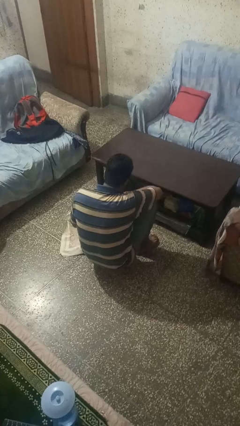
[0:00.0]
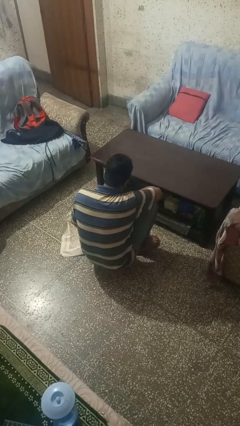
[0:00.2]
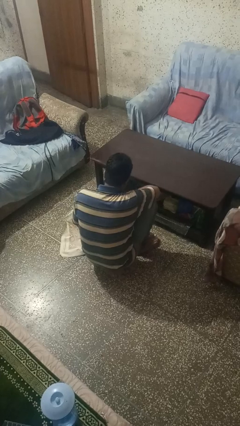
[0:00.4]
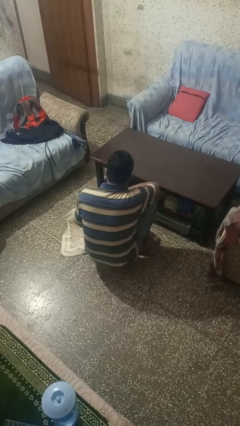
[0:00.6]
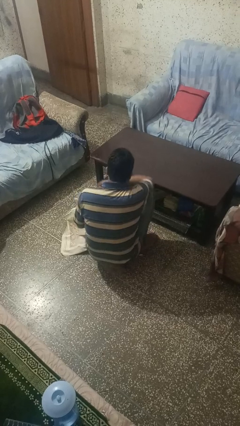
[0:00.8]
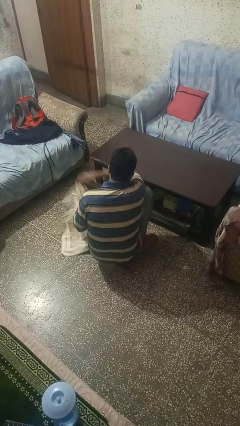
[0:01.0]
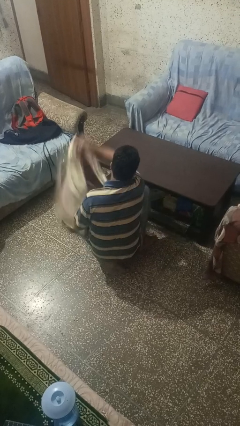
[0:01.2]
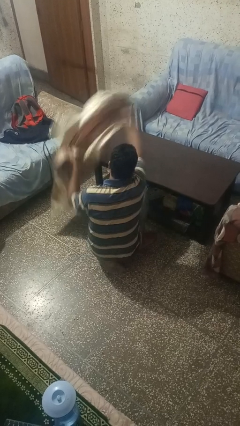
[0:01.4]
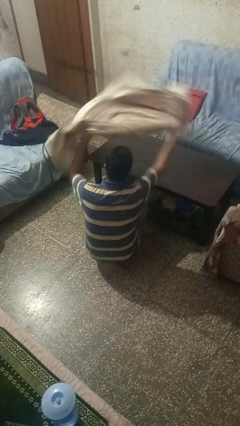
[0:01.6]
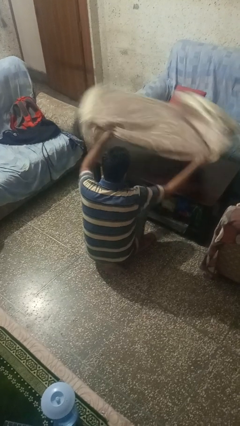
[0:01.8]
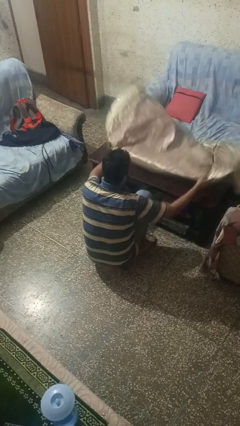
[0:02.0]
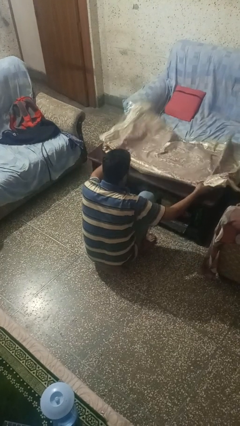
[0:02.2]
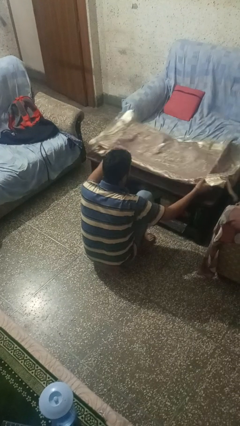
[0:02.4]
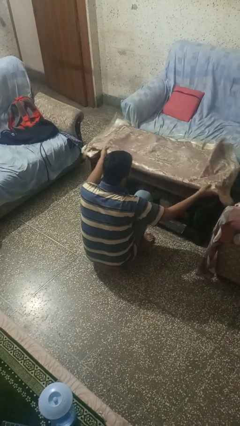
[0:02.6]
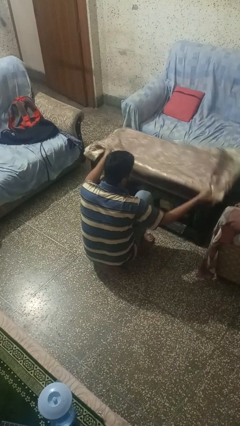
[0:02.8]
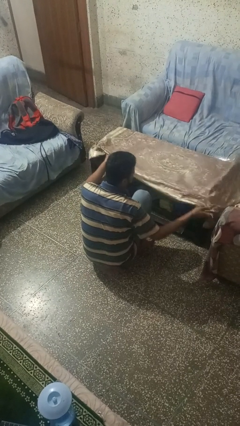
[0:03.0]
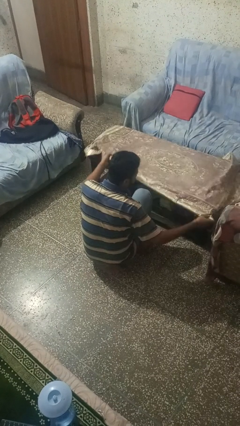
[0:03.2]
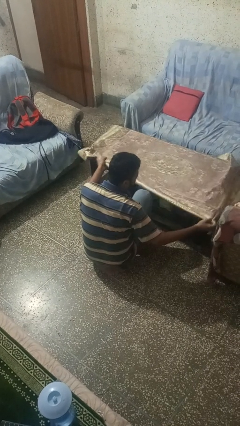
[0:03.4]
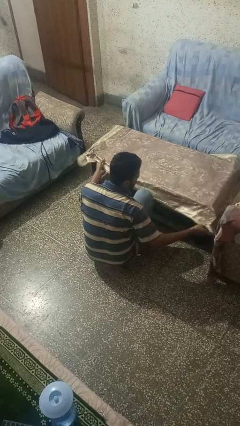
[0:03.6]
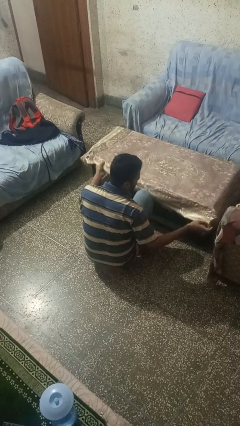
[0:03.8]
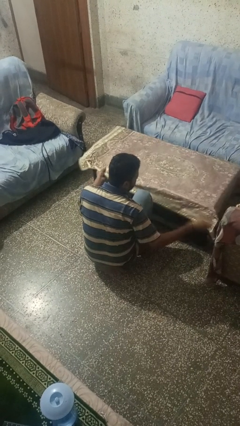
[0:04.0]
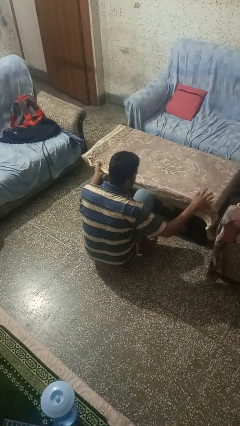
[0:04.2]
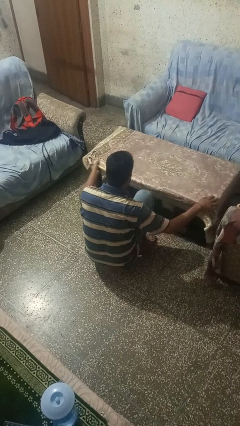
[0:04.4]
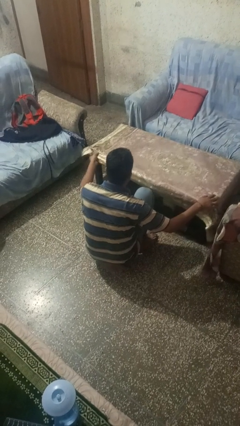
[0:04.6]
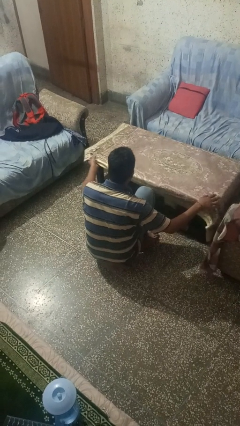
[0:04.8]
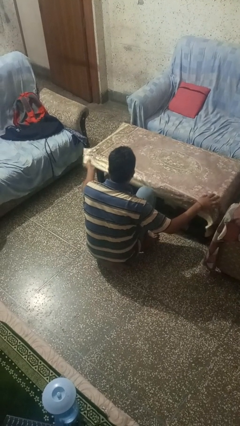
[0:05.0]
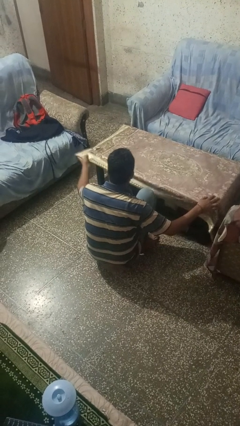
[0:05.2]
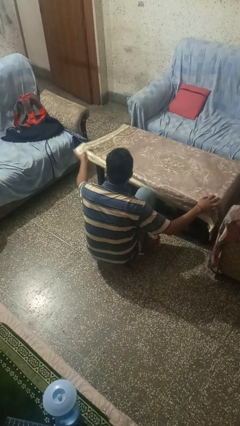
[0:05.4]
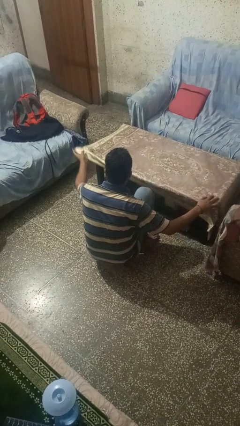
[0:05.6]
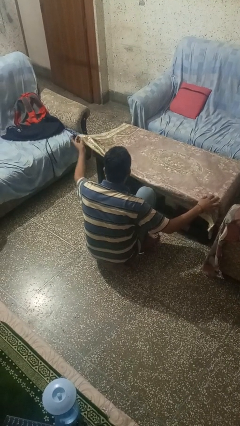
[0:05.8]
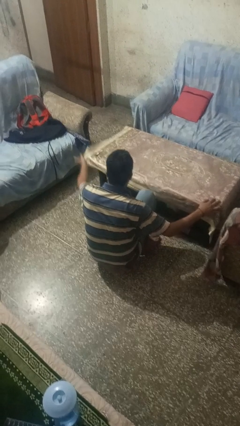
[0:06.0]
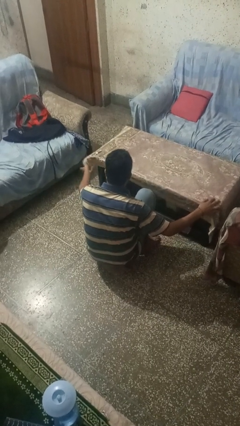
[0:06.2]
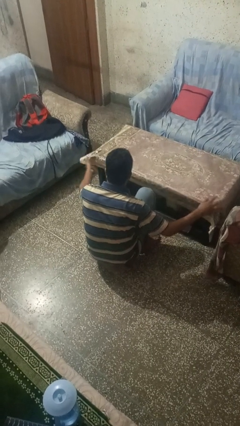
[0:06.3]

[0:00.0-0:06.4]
person spreads tablecloth

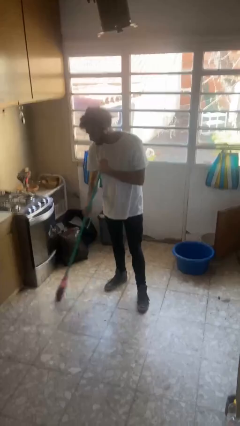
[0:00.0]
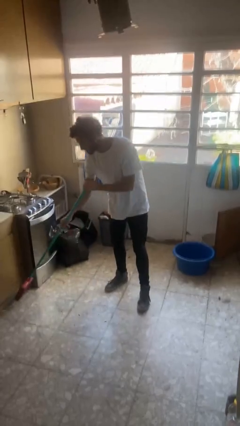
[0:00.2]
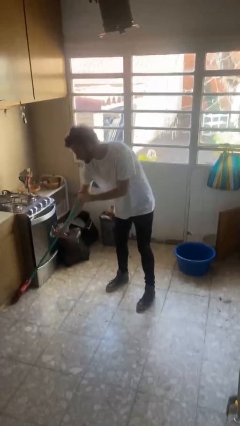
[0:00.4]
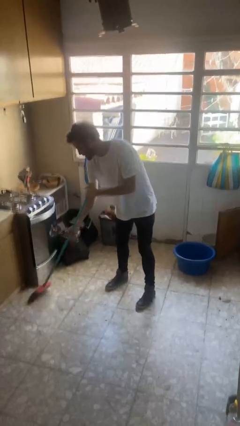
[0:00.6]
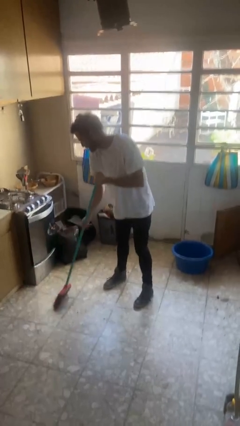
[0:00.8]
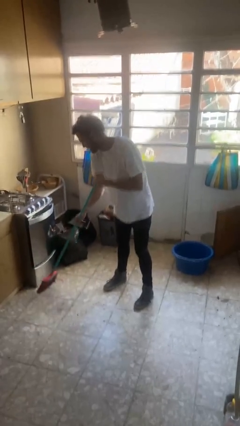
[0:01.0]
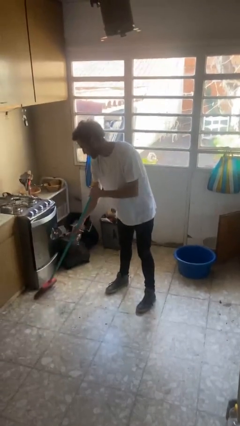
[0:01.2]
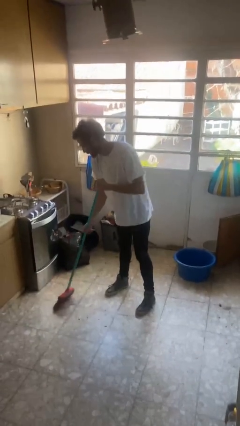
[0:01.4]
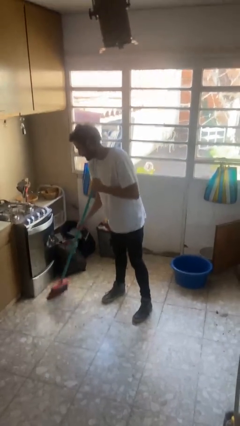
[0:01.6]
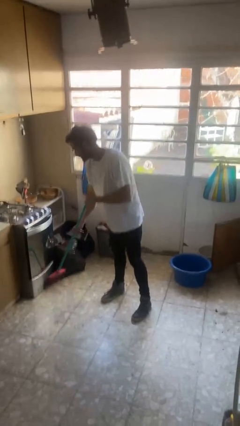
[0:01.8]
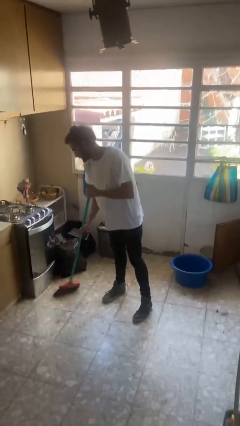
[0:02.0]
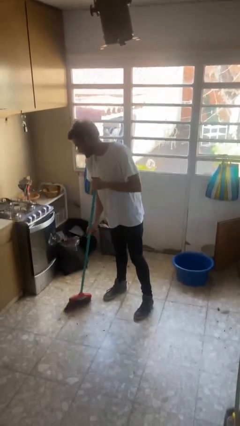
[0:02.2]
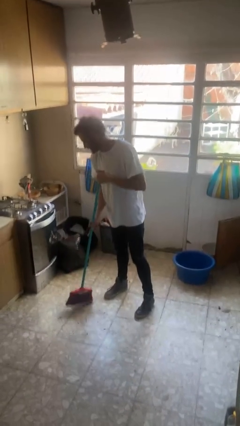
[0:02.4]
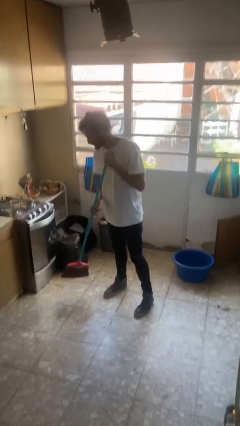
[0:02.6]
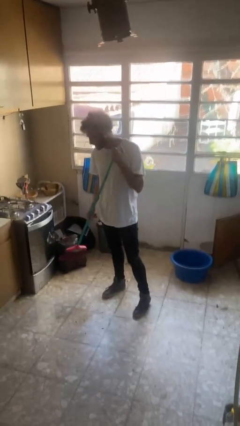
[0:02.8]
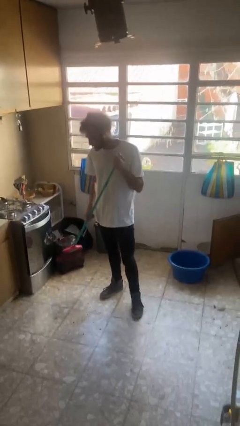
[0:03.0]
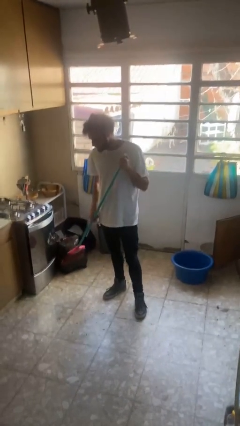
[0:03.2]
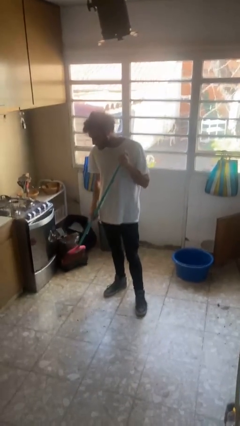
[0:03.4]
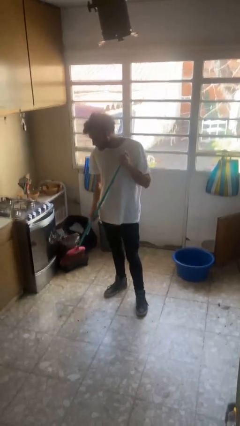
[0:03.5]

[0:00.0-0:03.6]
person sweeps floor

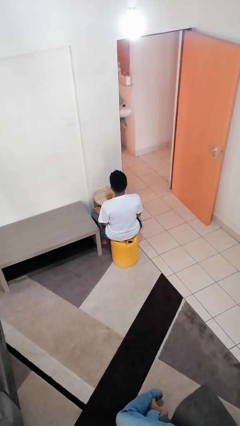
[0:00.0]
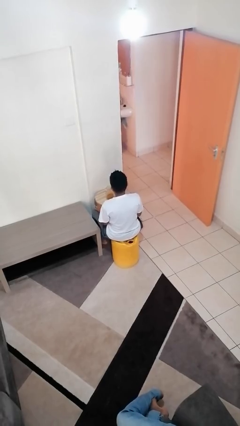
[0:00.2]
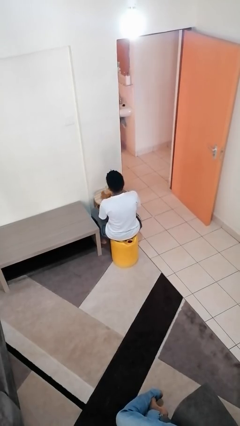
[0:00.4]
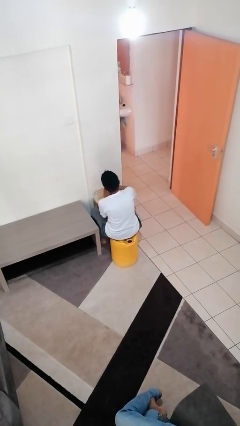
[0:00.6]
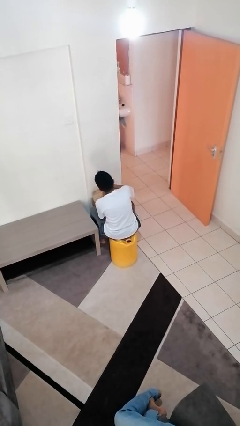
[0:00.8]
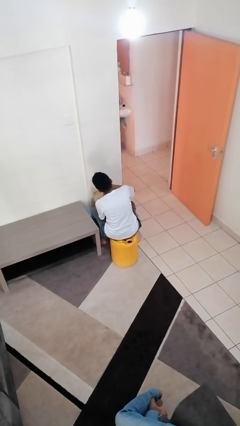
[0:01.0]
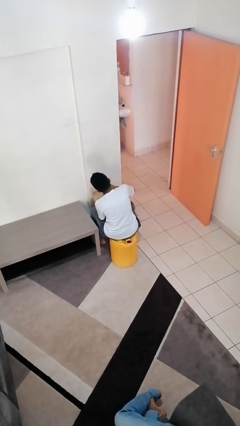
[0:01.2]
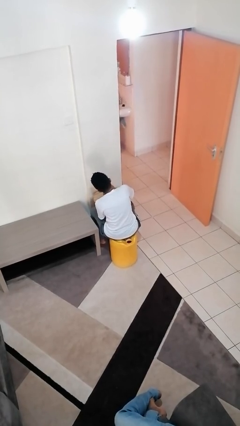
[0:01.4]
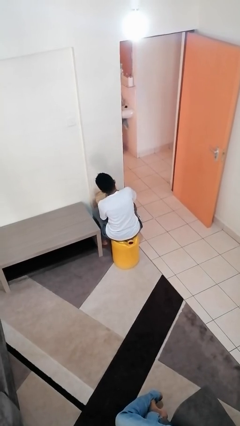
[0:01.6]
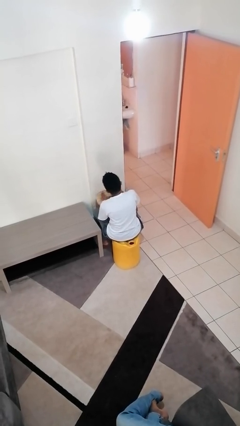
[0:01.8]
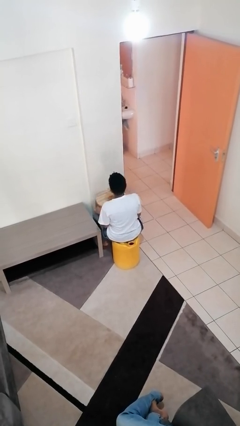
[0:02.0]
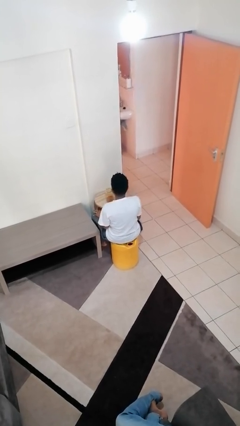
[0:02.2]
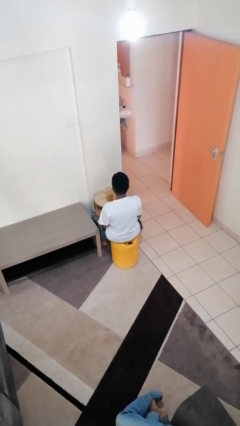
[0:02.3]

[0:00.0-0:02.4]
person closes jar

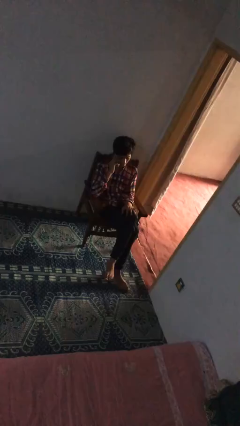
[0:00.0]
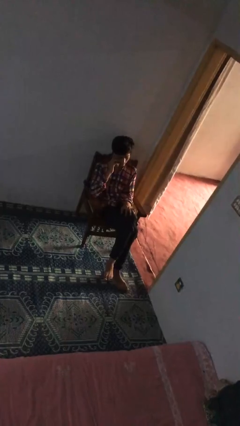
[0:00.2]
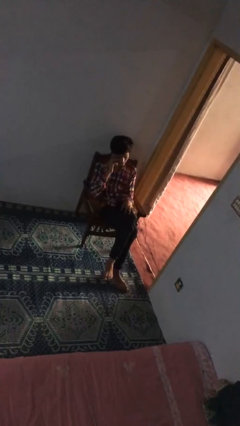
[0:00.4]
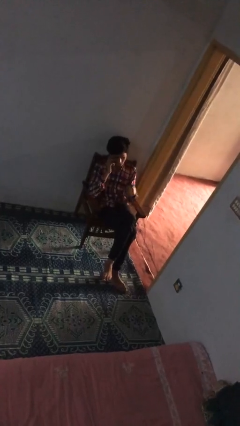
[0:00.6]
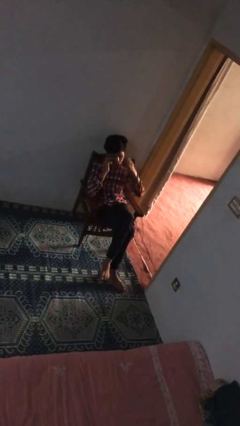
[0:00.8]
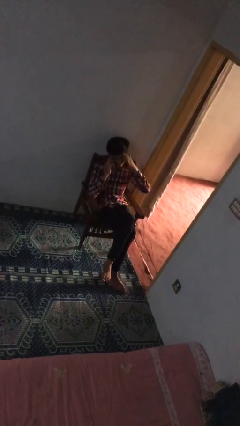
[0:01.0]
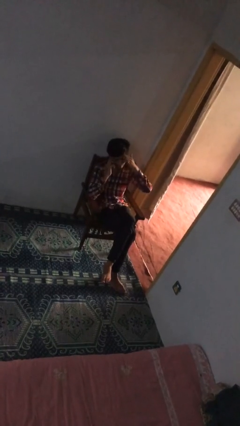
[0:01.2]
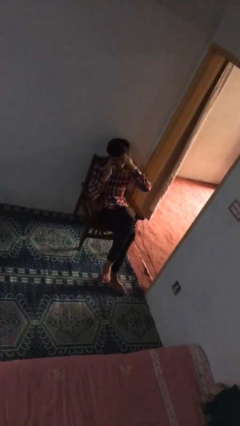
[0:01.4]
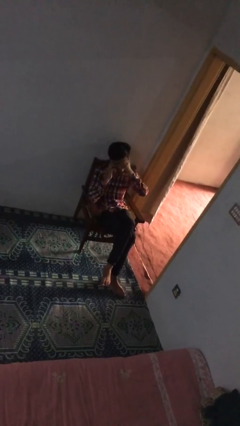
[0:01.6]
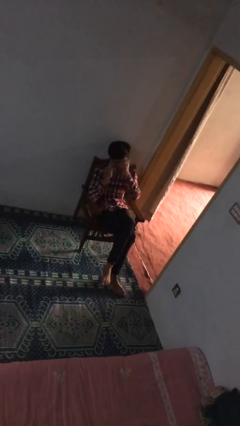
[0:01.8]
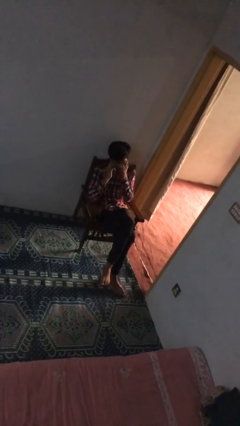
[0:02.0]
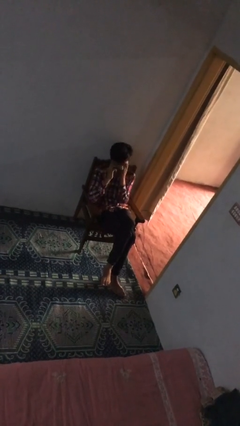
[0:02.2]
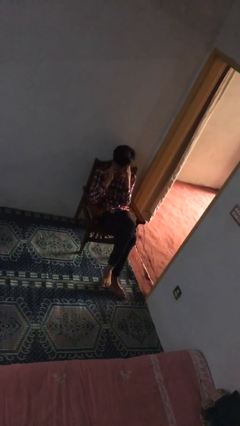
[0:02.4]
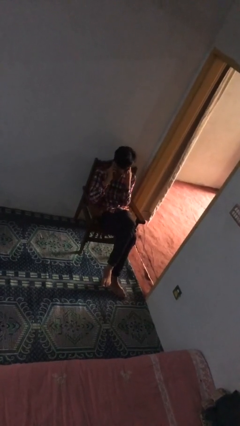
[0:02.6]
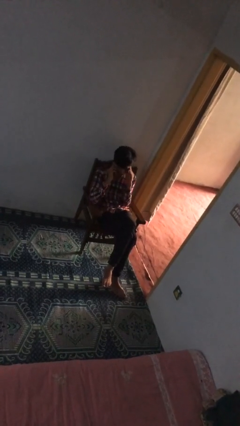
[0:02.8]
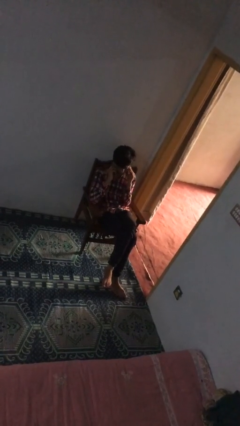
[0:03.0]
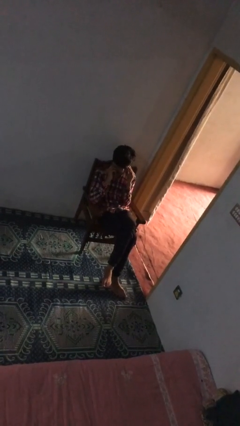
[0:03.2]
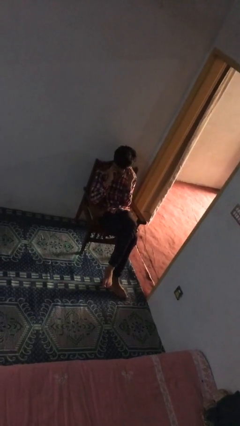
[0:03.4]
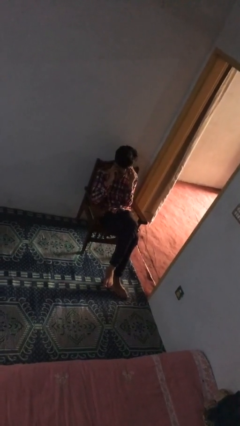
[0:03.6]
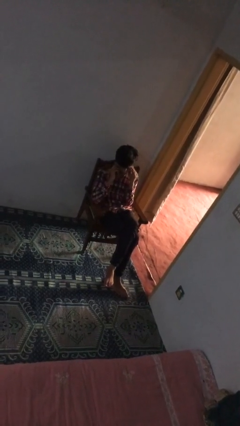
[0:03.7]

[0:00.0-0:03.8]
person talks on phone

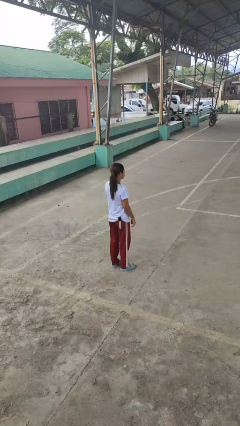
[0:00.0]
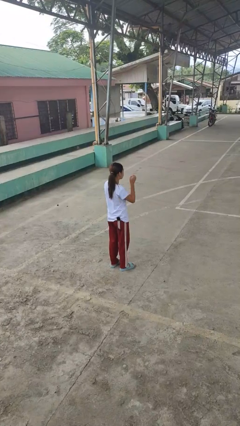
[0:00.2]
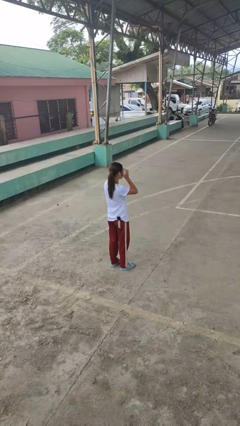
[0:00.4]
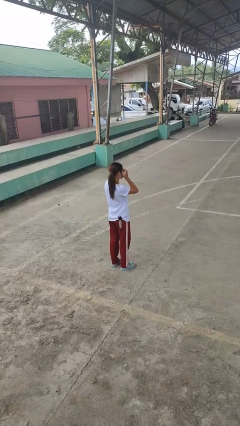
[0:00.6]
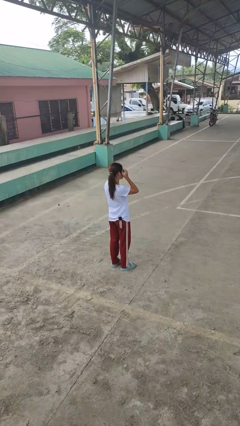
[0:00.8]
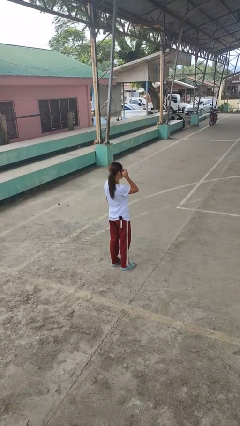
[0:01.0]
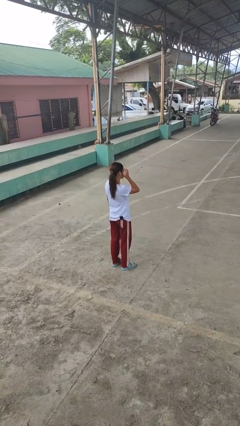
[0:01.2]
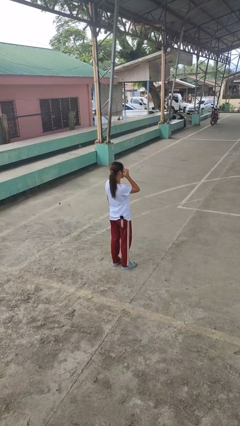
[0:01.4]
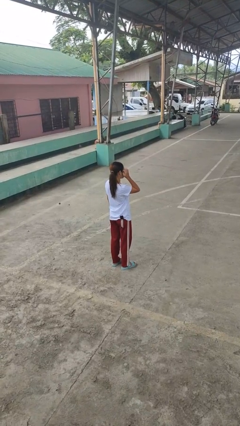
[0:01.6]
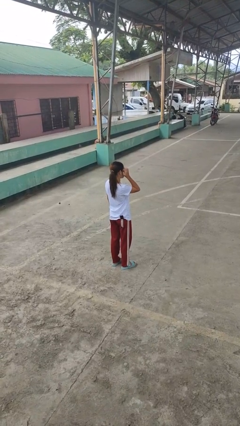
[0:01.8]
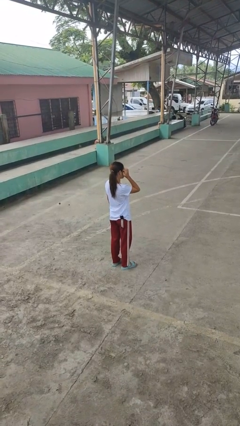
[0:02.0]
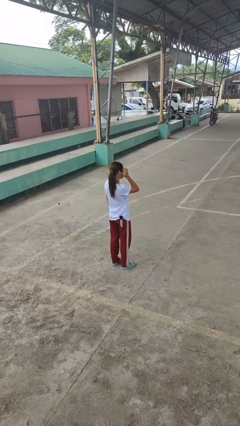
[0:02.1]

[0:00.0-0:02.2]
person scratches face
